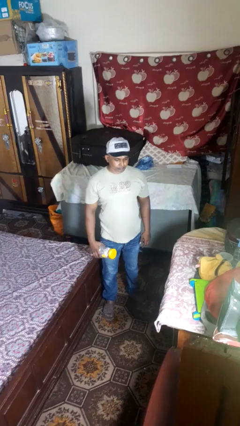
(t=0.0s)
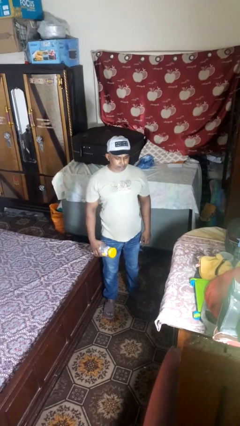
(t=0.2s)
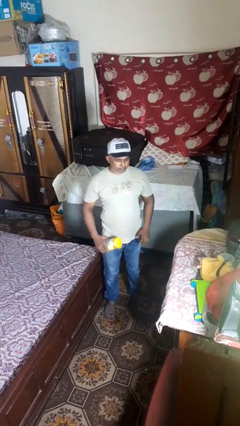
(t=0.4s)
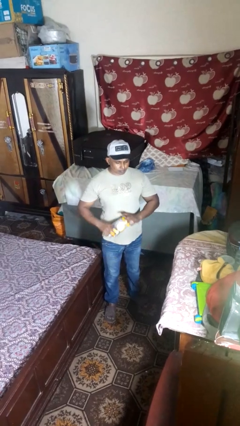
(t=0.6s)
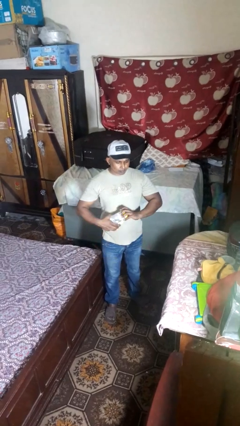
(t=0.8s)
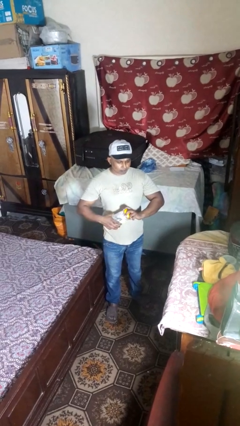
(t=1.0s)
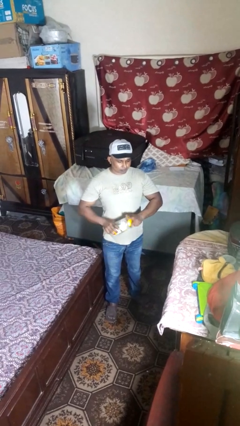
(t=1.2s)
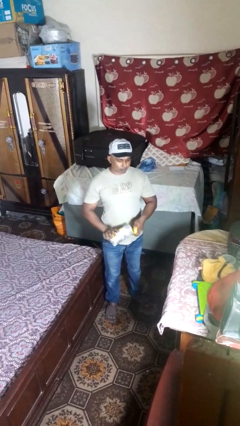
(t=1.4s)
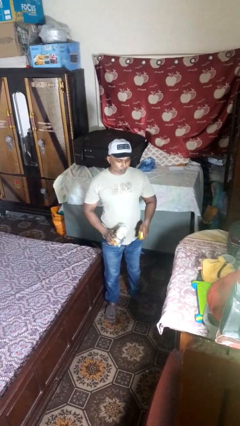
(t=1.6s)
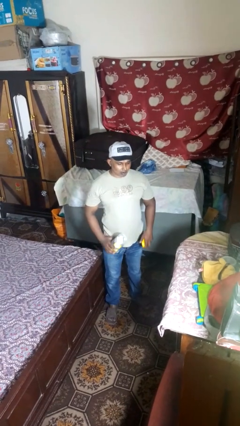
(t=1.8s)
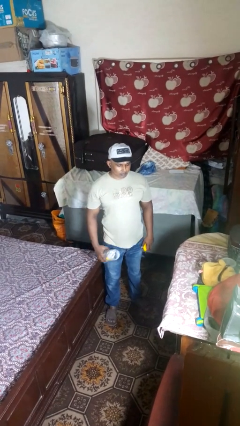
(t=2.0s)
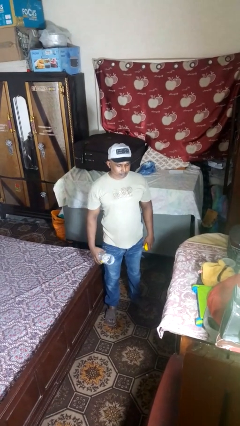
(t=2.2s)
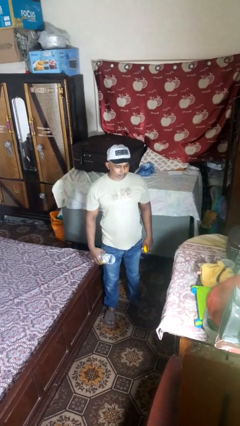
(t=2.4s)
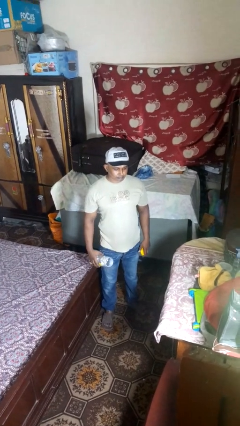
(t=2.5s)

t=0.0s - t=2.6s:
person opens jar

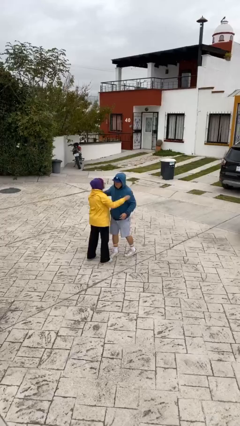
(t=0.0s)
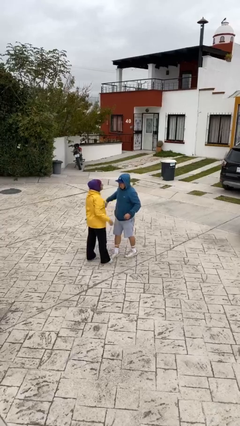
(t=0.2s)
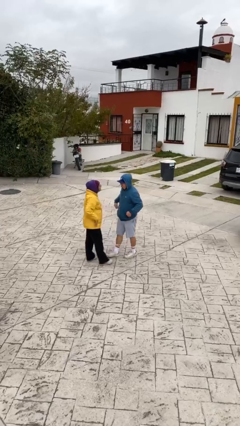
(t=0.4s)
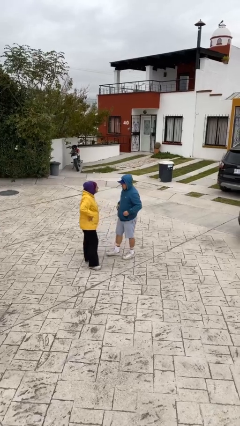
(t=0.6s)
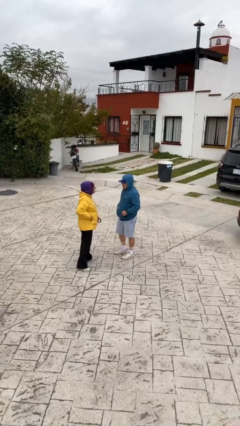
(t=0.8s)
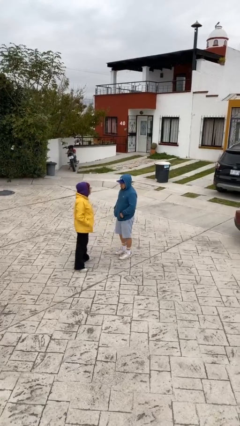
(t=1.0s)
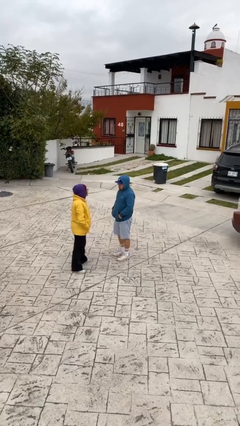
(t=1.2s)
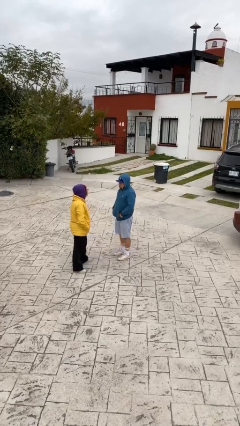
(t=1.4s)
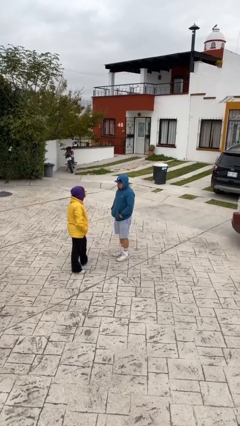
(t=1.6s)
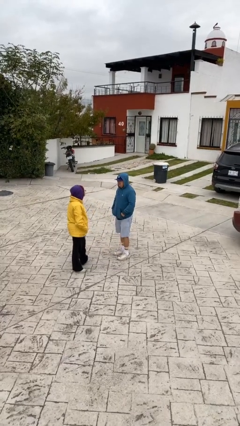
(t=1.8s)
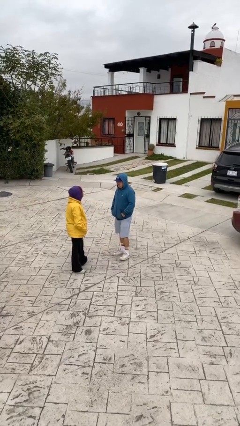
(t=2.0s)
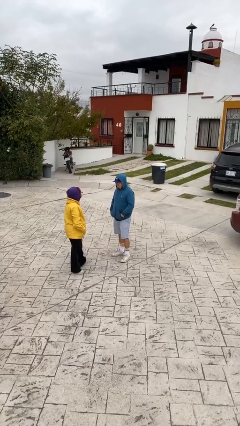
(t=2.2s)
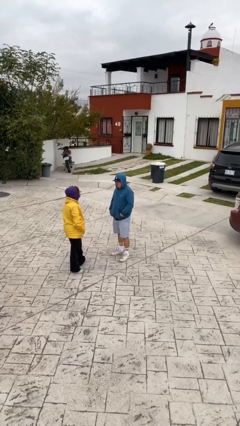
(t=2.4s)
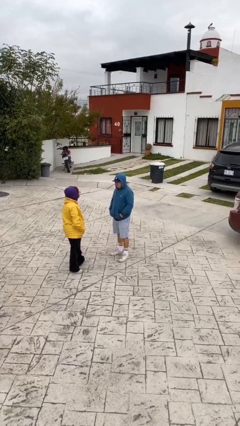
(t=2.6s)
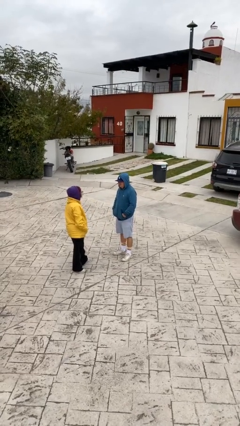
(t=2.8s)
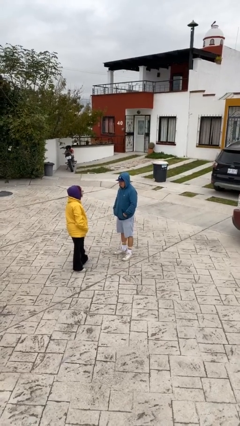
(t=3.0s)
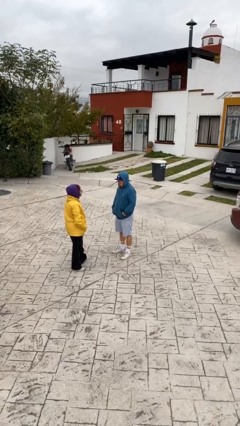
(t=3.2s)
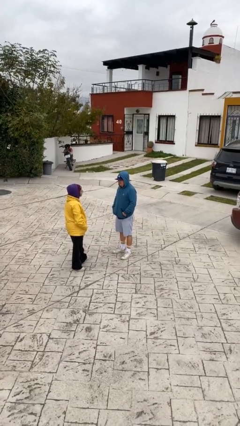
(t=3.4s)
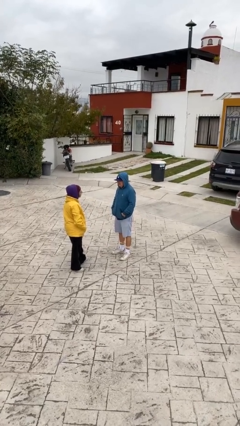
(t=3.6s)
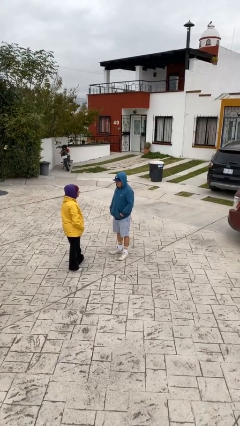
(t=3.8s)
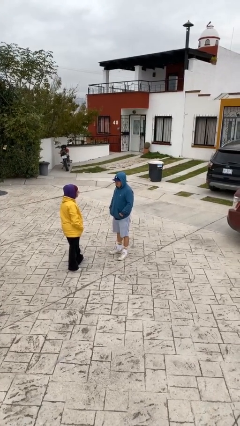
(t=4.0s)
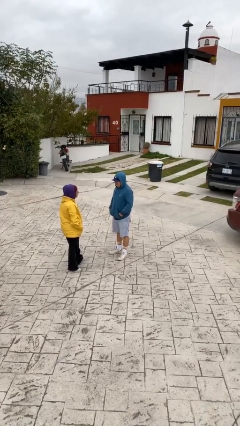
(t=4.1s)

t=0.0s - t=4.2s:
person talks to person

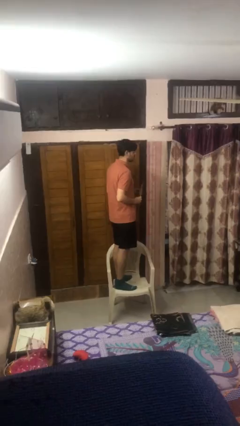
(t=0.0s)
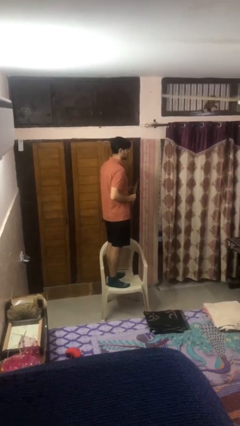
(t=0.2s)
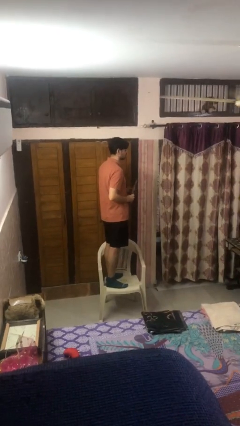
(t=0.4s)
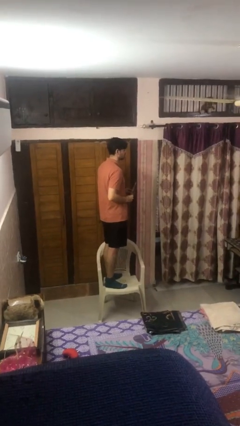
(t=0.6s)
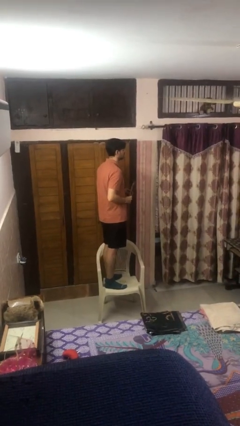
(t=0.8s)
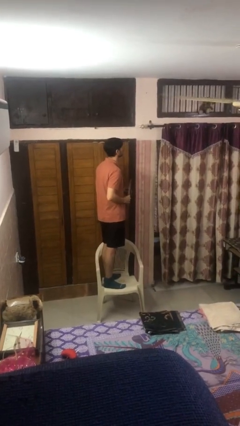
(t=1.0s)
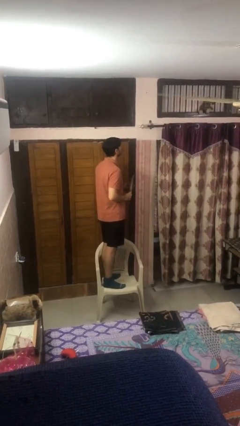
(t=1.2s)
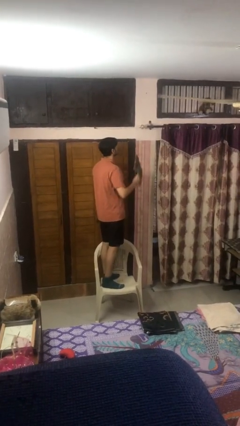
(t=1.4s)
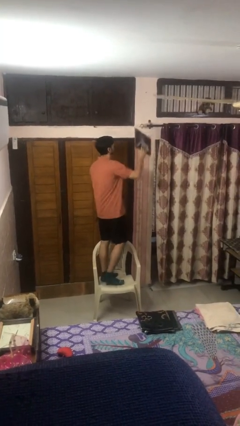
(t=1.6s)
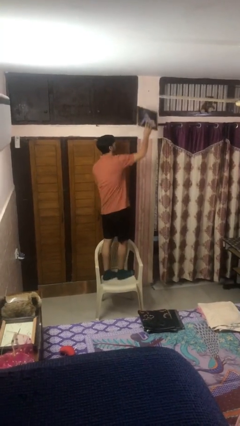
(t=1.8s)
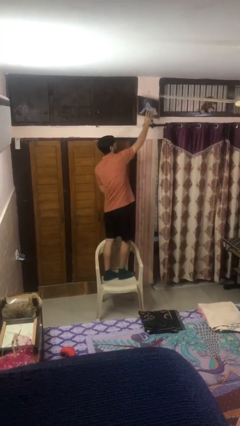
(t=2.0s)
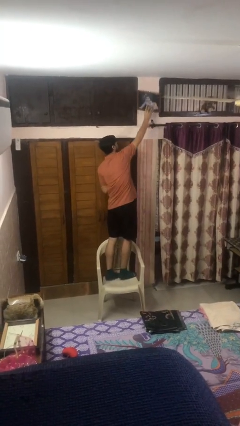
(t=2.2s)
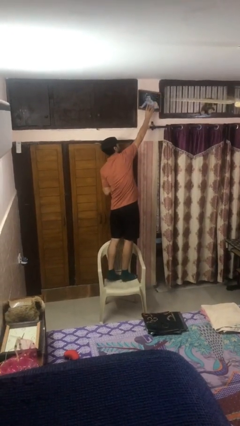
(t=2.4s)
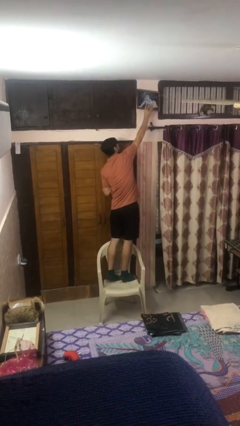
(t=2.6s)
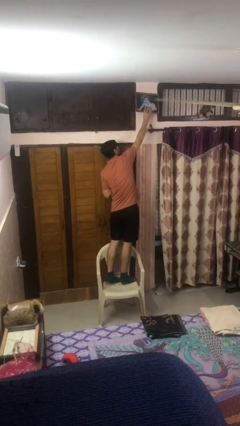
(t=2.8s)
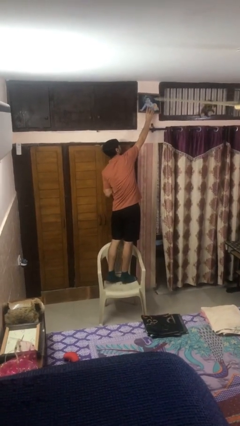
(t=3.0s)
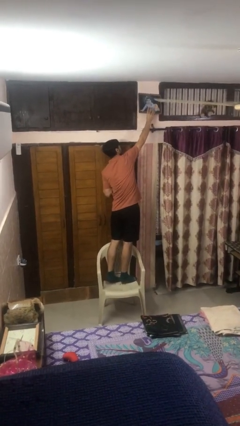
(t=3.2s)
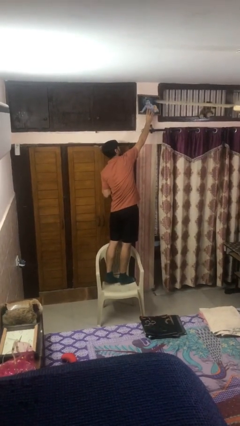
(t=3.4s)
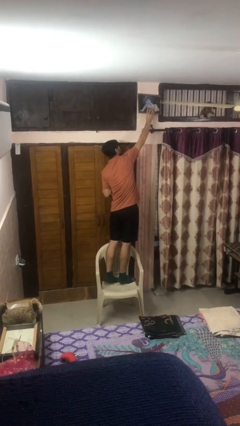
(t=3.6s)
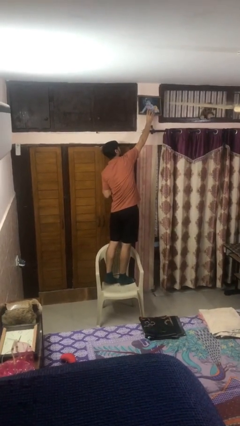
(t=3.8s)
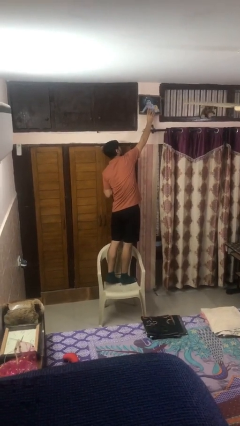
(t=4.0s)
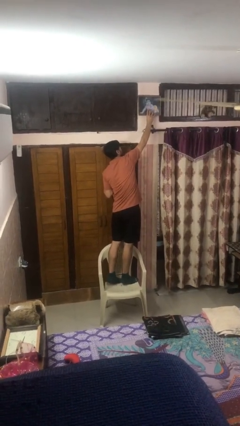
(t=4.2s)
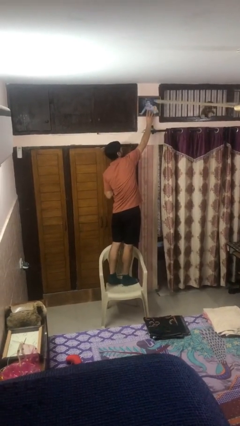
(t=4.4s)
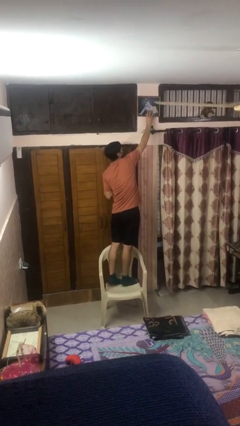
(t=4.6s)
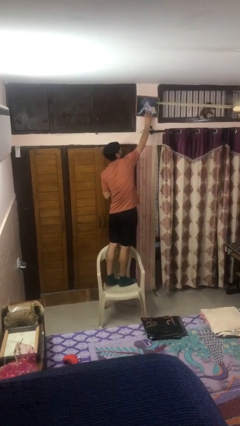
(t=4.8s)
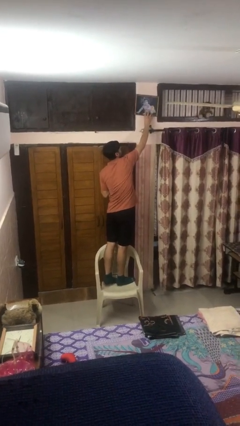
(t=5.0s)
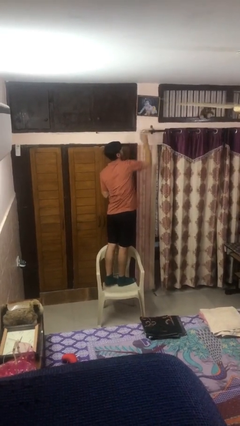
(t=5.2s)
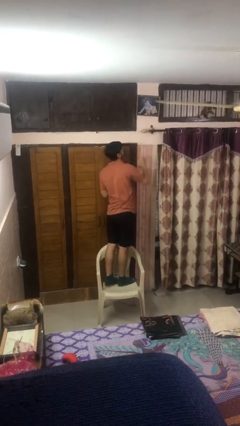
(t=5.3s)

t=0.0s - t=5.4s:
person puts up picture frame

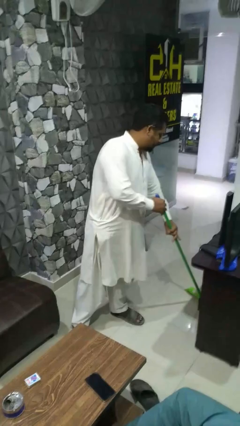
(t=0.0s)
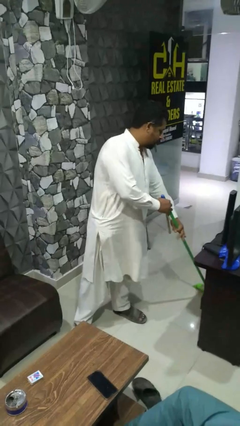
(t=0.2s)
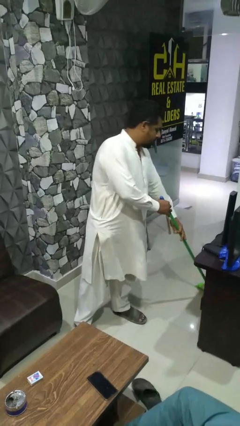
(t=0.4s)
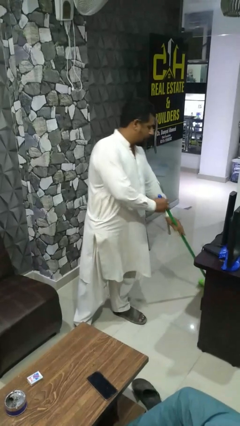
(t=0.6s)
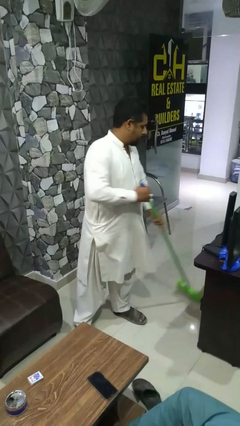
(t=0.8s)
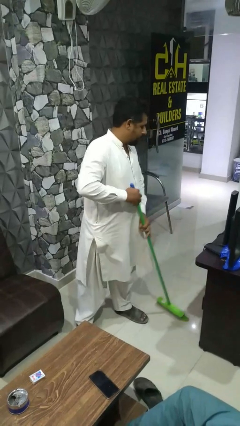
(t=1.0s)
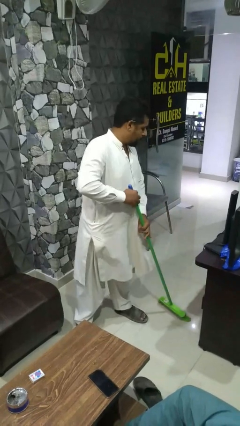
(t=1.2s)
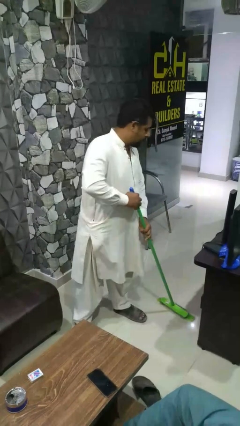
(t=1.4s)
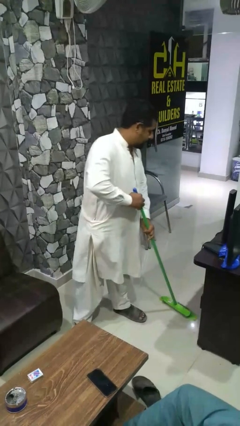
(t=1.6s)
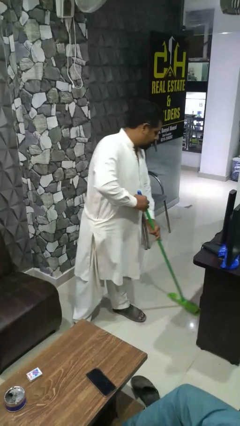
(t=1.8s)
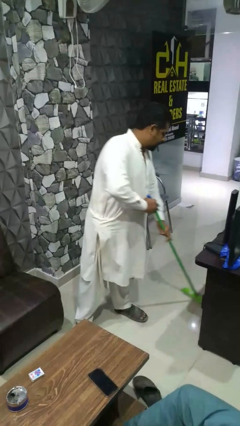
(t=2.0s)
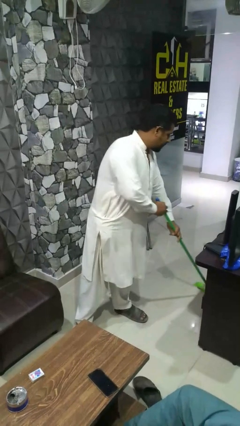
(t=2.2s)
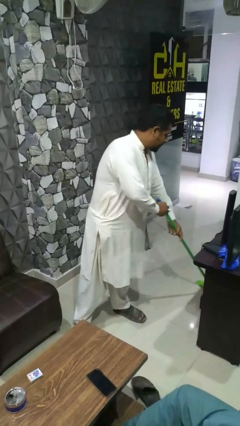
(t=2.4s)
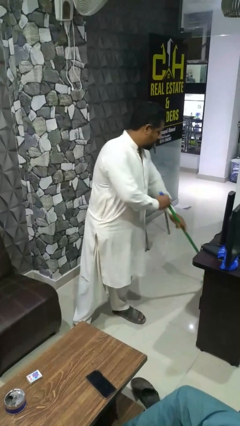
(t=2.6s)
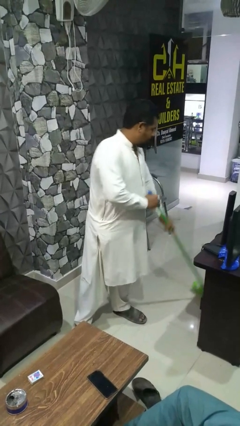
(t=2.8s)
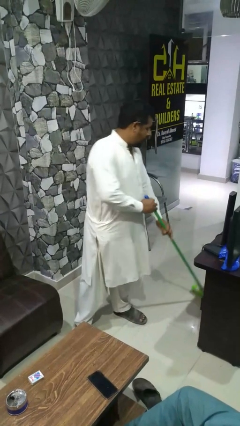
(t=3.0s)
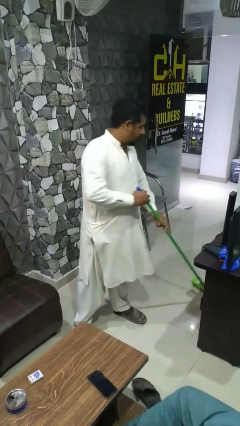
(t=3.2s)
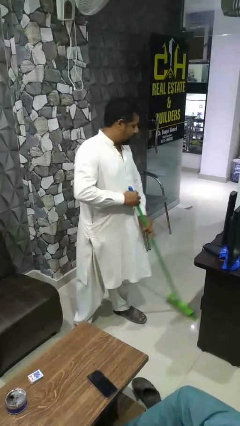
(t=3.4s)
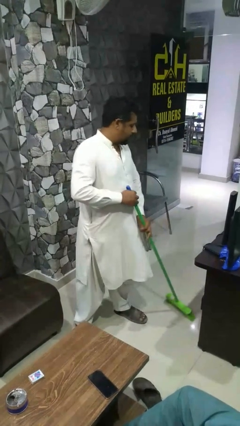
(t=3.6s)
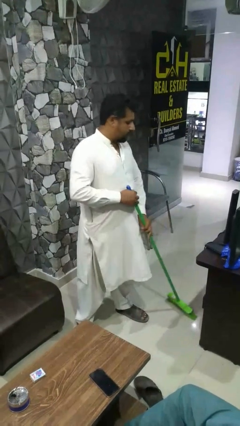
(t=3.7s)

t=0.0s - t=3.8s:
person mops

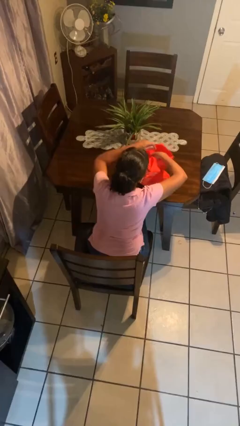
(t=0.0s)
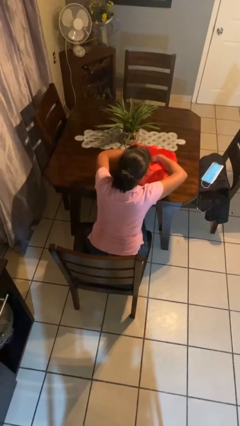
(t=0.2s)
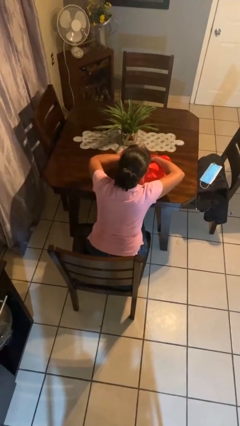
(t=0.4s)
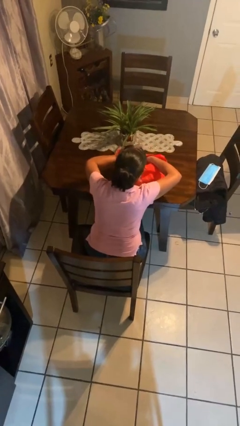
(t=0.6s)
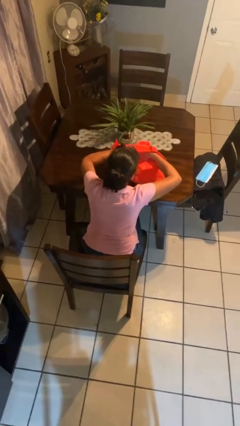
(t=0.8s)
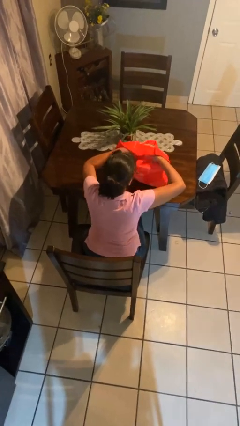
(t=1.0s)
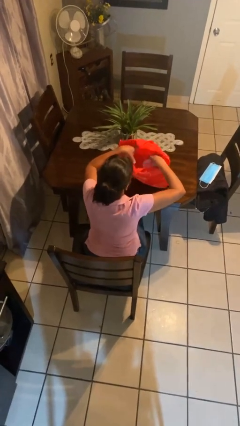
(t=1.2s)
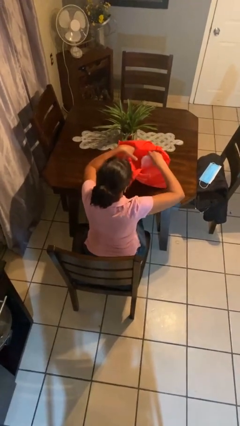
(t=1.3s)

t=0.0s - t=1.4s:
person takes object from bag

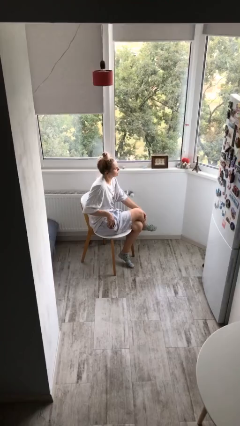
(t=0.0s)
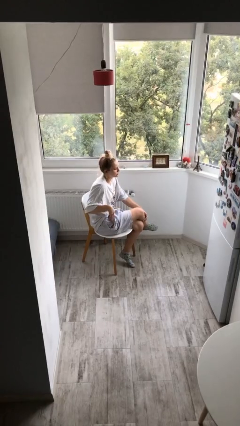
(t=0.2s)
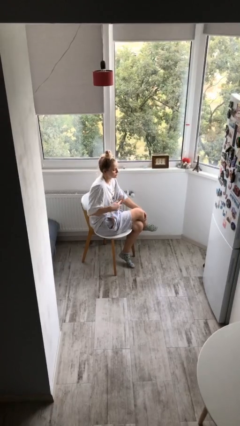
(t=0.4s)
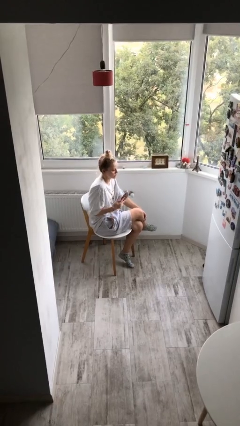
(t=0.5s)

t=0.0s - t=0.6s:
person takes phone from pocket
